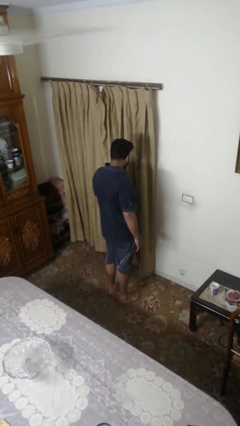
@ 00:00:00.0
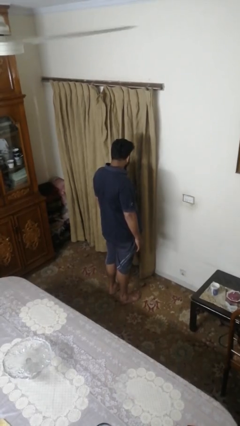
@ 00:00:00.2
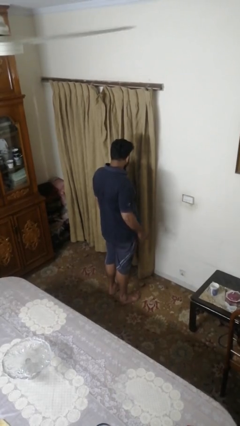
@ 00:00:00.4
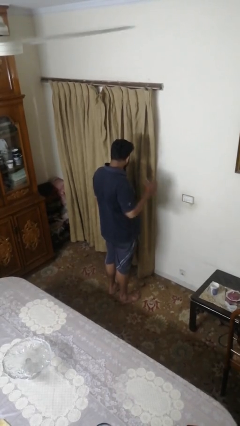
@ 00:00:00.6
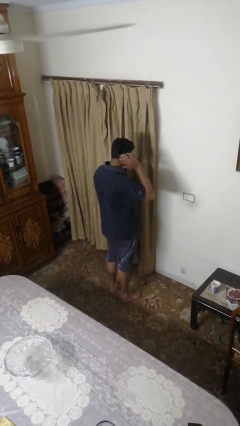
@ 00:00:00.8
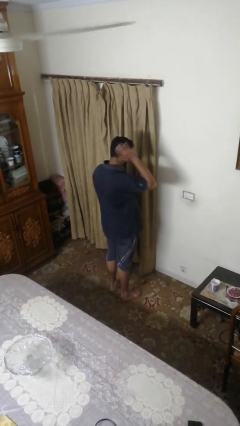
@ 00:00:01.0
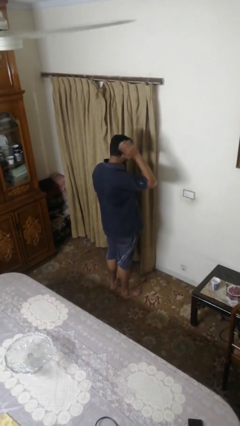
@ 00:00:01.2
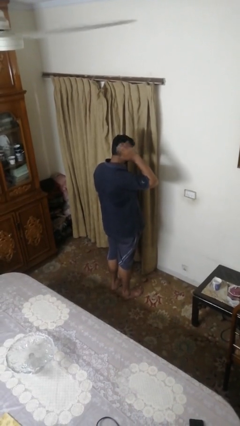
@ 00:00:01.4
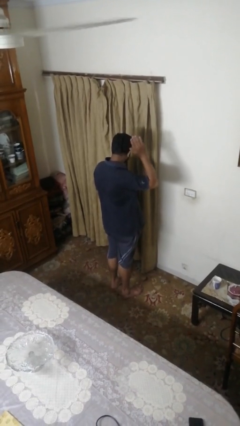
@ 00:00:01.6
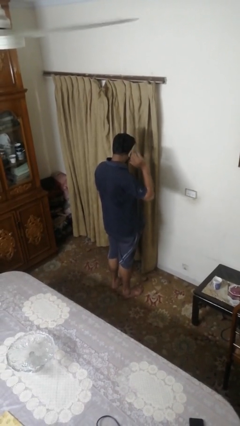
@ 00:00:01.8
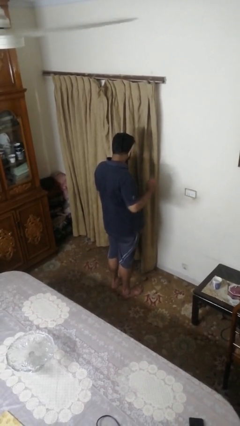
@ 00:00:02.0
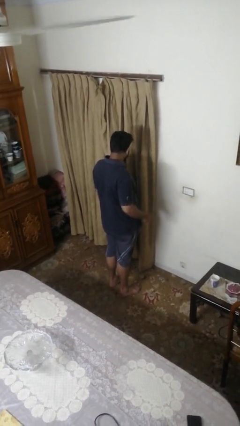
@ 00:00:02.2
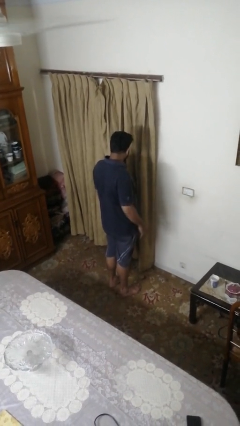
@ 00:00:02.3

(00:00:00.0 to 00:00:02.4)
person strokes hair

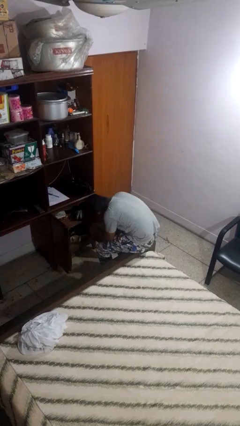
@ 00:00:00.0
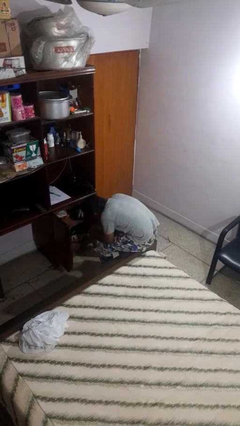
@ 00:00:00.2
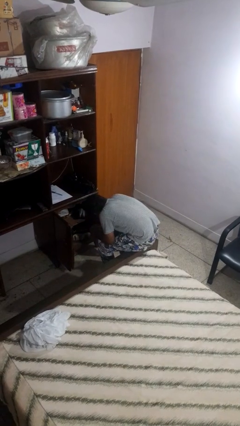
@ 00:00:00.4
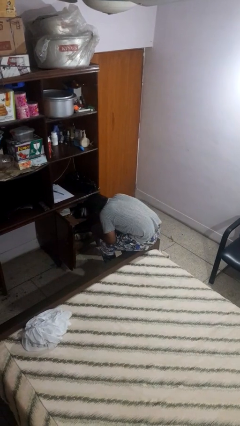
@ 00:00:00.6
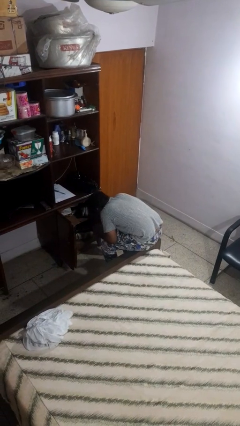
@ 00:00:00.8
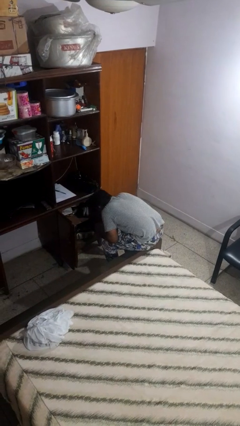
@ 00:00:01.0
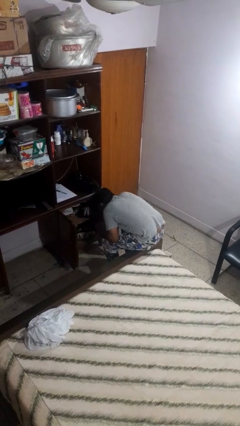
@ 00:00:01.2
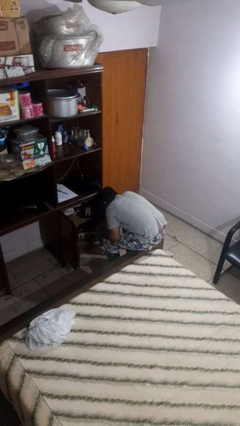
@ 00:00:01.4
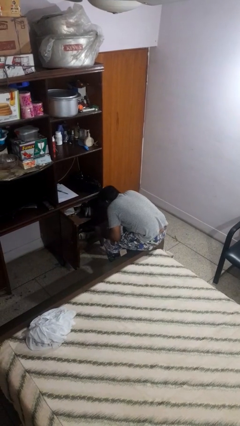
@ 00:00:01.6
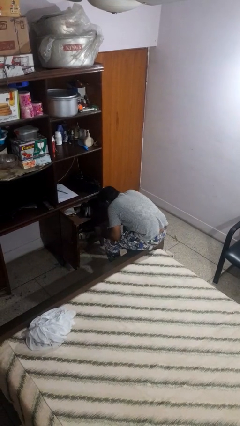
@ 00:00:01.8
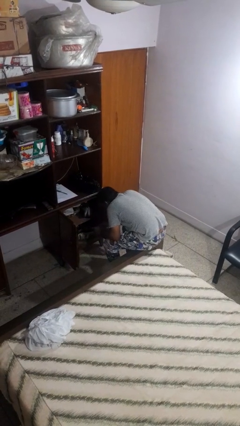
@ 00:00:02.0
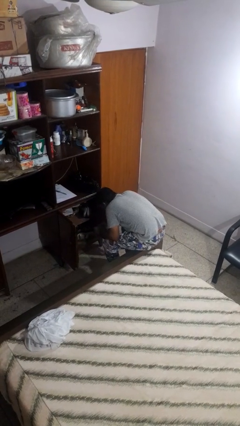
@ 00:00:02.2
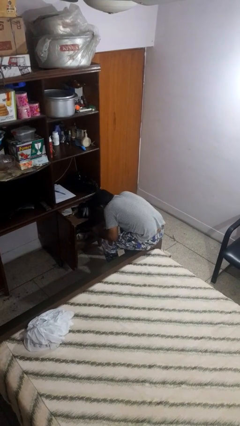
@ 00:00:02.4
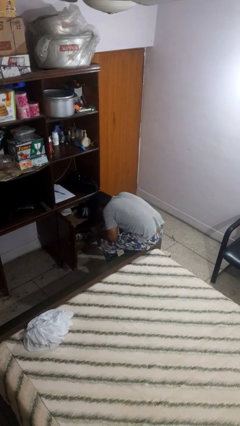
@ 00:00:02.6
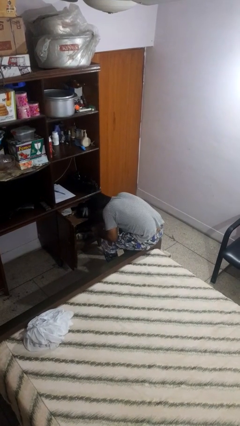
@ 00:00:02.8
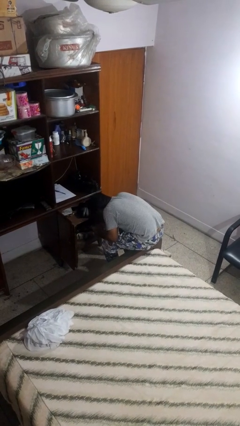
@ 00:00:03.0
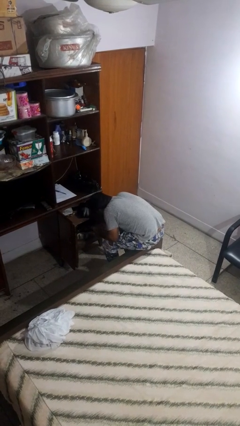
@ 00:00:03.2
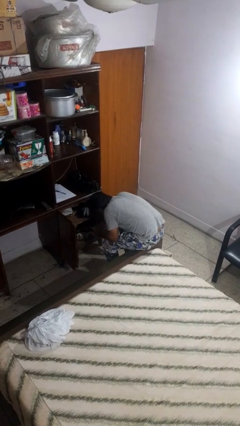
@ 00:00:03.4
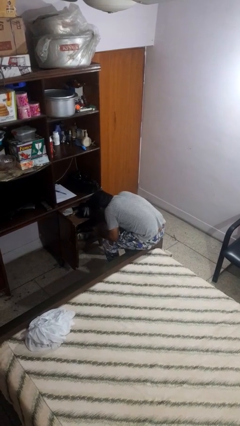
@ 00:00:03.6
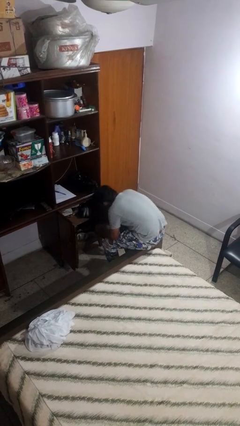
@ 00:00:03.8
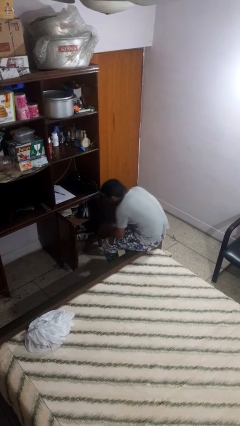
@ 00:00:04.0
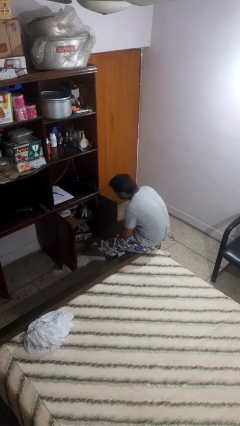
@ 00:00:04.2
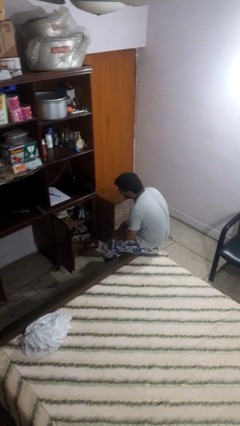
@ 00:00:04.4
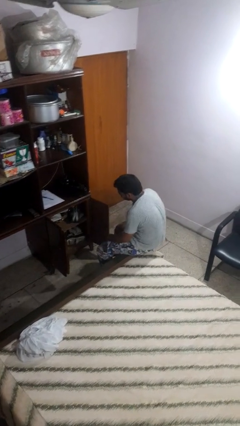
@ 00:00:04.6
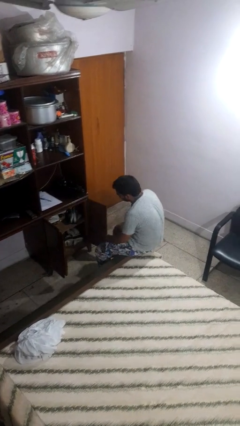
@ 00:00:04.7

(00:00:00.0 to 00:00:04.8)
person searches in cabinet

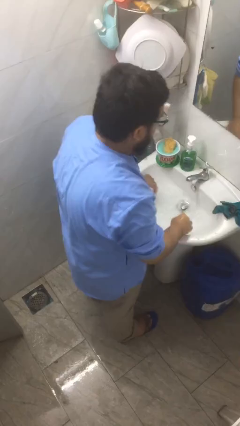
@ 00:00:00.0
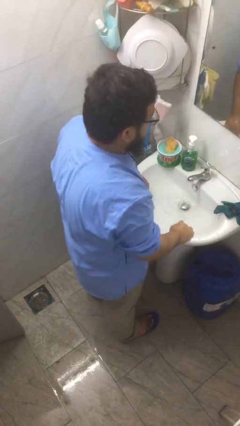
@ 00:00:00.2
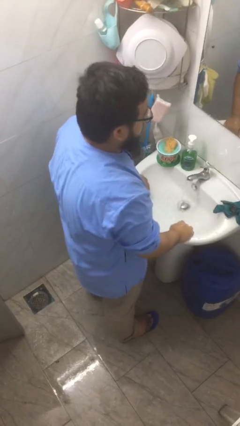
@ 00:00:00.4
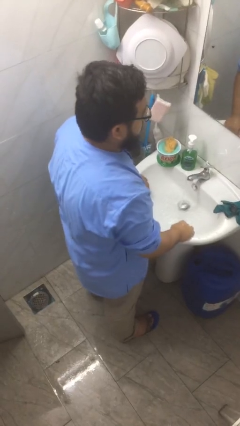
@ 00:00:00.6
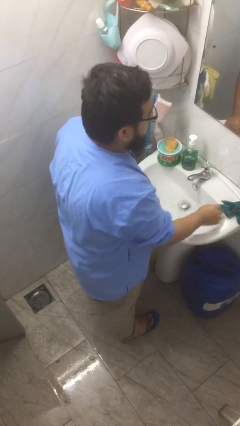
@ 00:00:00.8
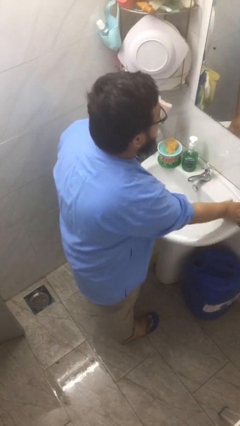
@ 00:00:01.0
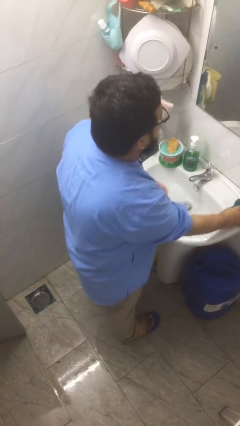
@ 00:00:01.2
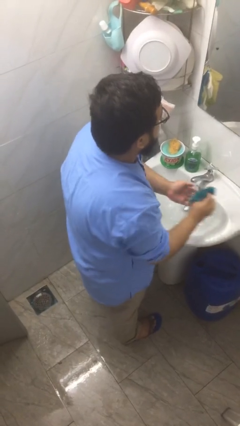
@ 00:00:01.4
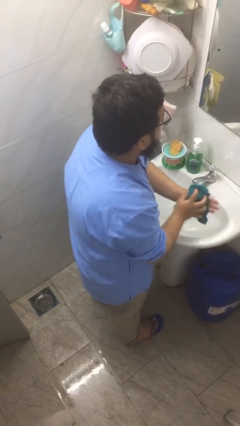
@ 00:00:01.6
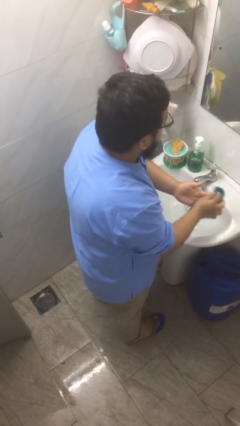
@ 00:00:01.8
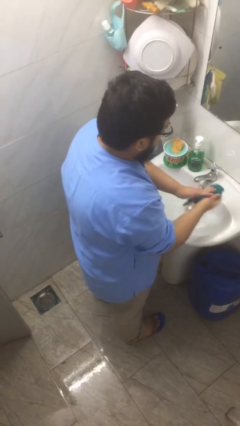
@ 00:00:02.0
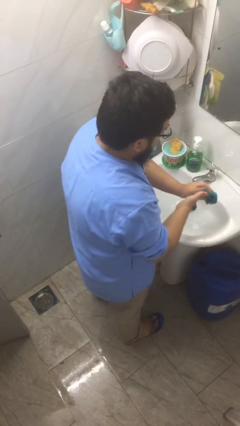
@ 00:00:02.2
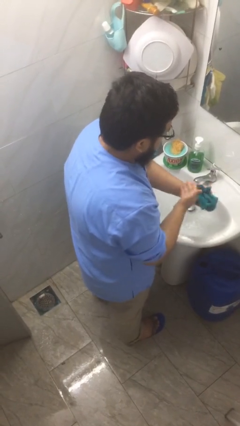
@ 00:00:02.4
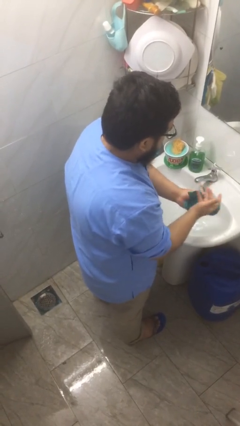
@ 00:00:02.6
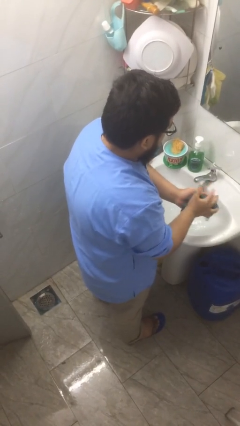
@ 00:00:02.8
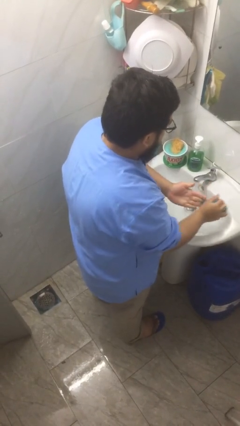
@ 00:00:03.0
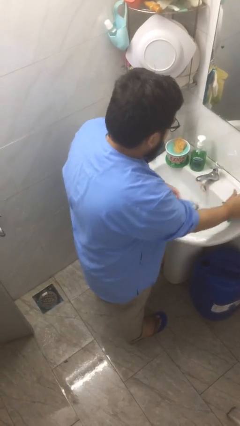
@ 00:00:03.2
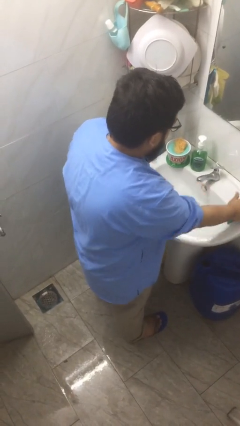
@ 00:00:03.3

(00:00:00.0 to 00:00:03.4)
person dries hands with towel

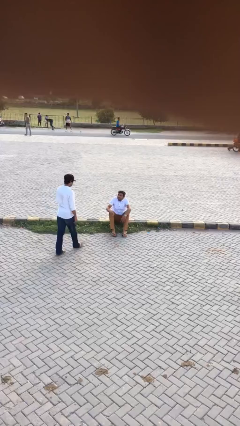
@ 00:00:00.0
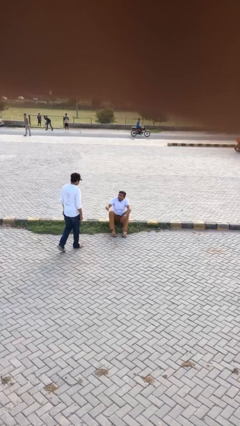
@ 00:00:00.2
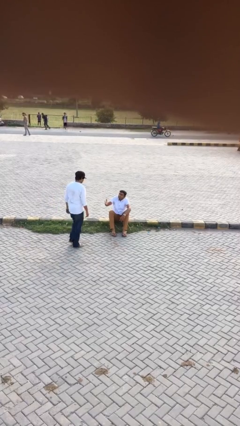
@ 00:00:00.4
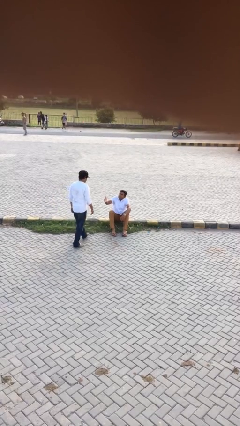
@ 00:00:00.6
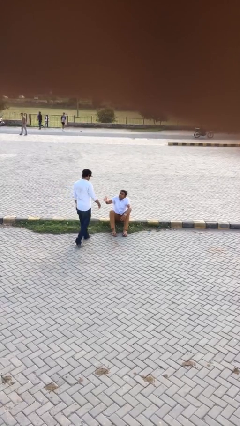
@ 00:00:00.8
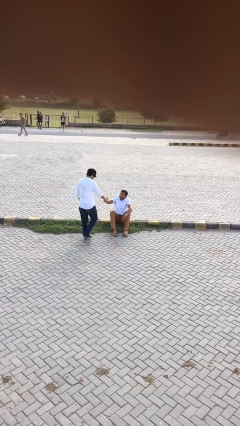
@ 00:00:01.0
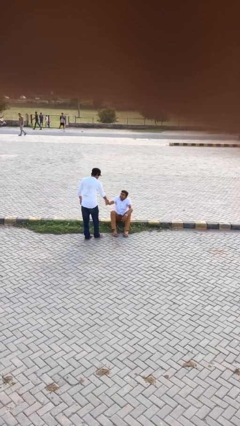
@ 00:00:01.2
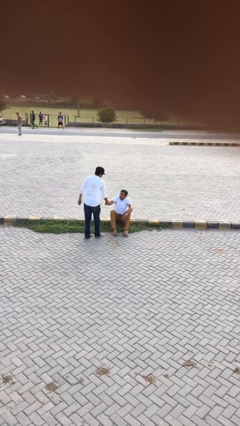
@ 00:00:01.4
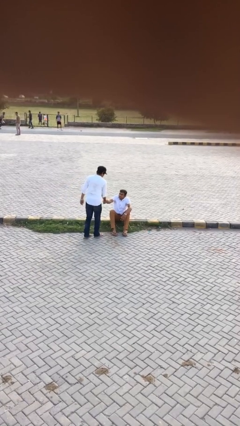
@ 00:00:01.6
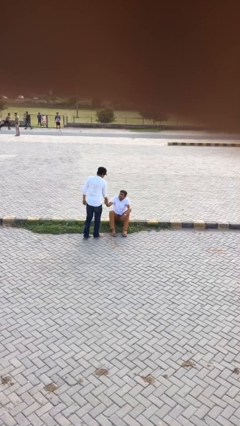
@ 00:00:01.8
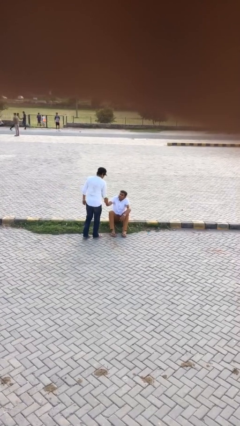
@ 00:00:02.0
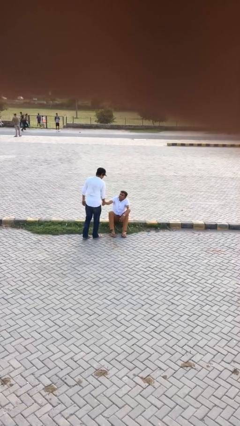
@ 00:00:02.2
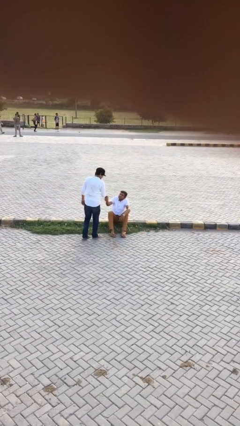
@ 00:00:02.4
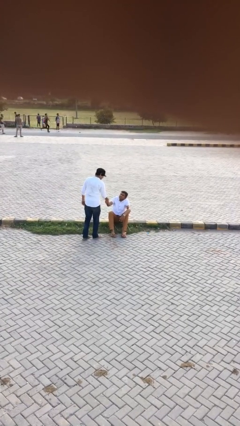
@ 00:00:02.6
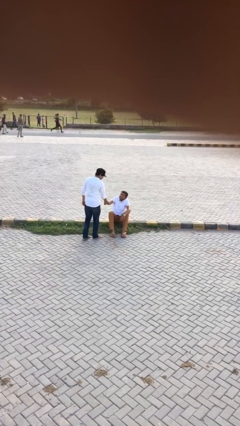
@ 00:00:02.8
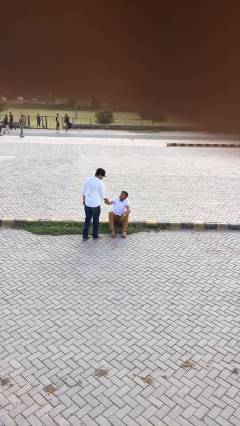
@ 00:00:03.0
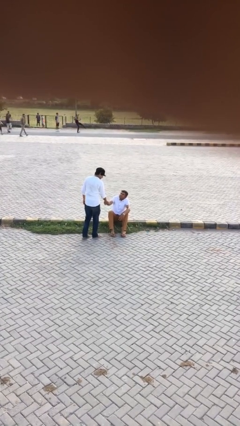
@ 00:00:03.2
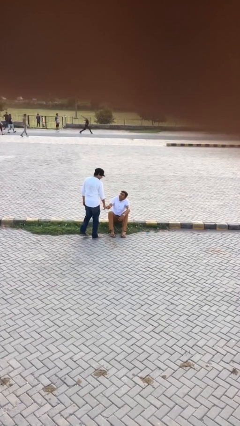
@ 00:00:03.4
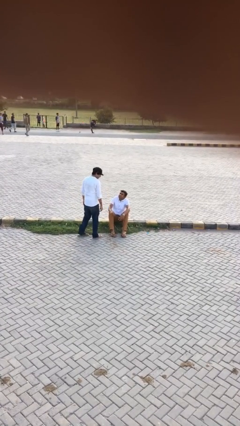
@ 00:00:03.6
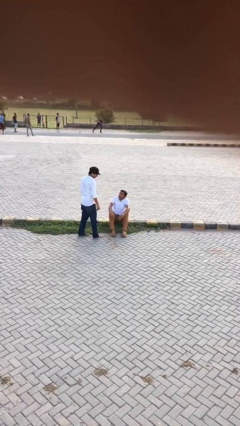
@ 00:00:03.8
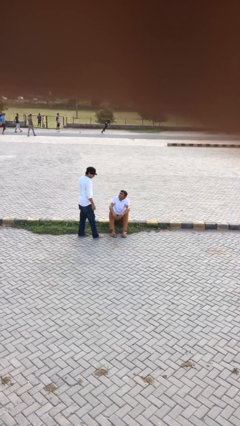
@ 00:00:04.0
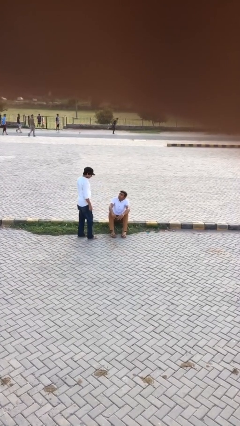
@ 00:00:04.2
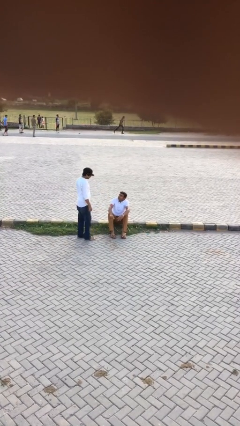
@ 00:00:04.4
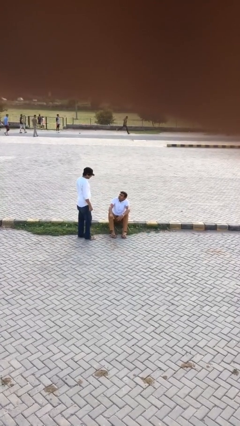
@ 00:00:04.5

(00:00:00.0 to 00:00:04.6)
person shakes hand

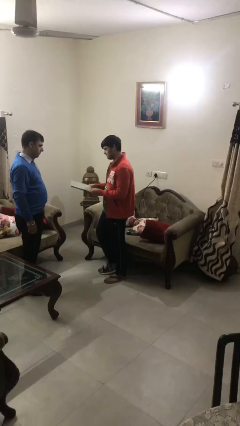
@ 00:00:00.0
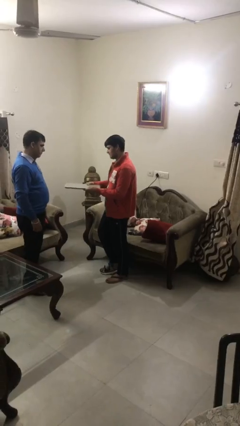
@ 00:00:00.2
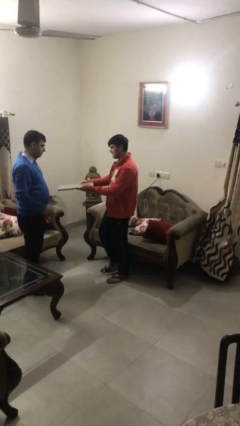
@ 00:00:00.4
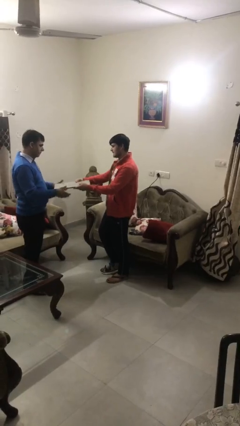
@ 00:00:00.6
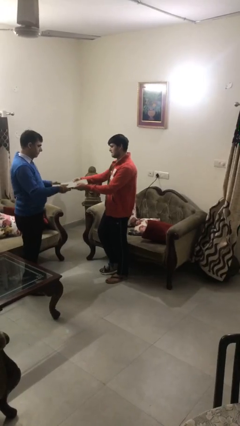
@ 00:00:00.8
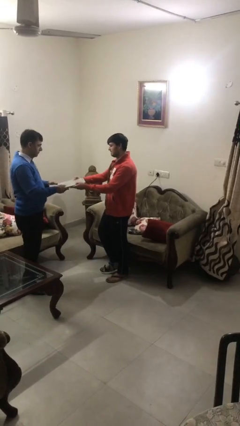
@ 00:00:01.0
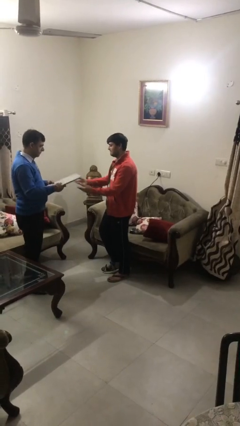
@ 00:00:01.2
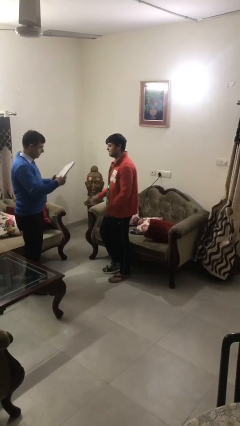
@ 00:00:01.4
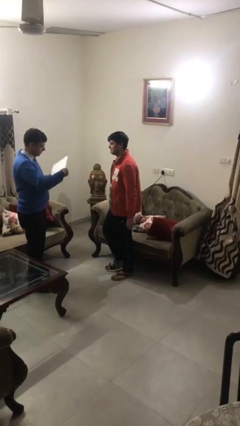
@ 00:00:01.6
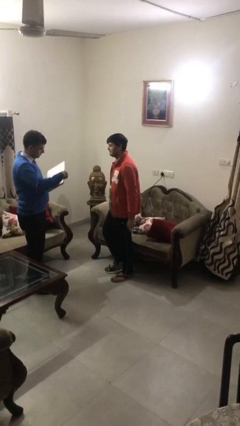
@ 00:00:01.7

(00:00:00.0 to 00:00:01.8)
person transfers object to person
